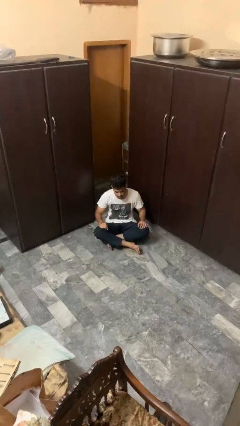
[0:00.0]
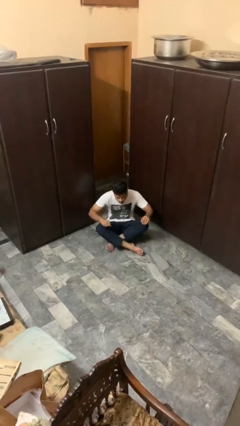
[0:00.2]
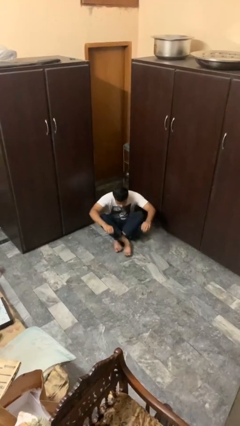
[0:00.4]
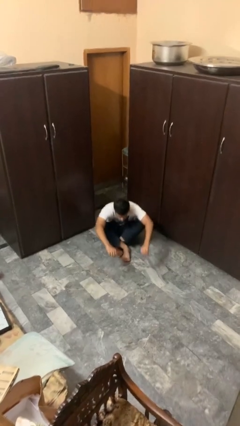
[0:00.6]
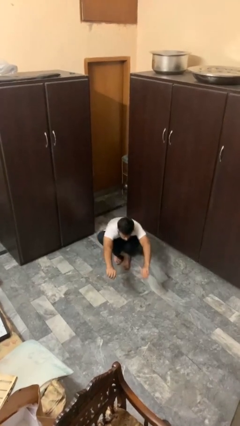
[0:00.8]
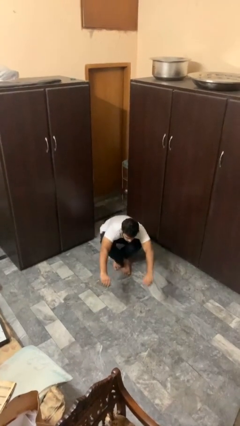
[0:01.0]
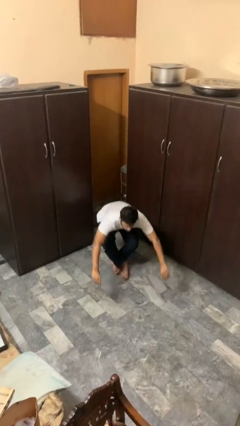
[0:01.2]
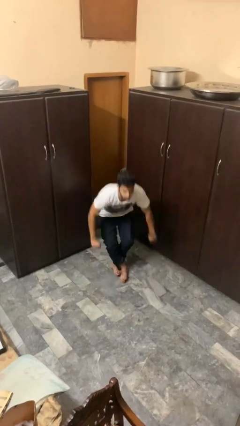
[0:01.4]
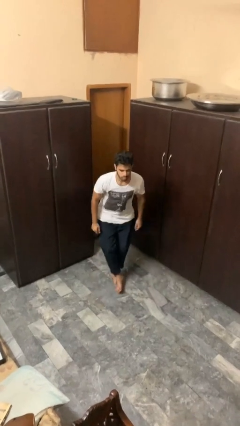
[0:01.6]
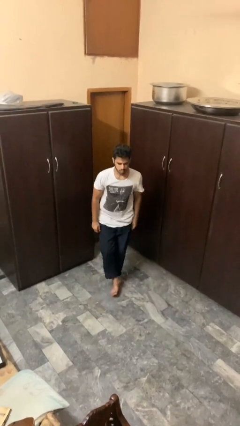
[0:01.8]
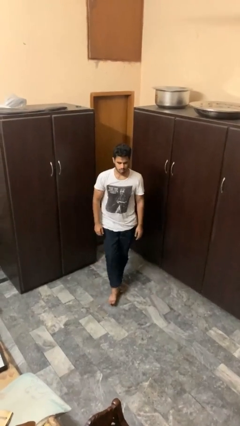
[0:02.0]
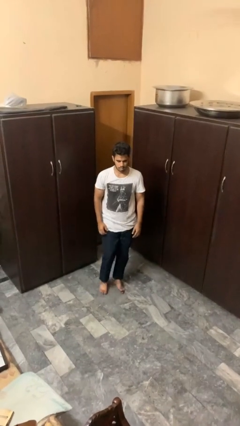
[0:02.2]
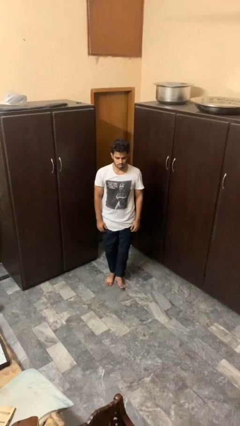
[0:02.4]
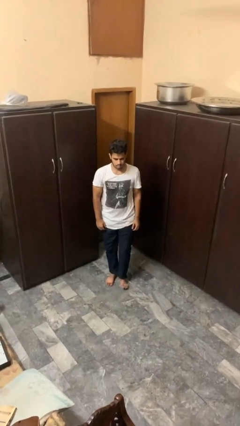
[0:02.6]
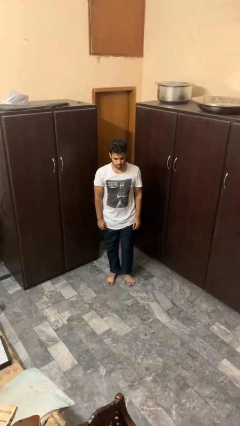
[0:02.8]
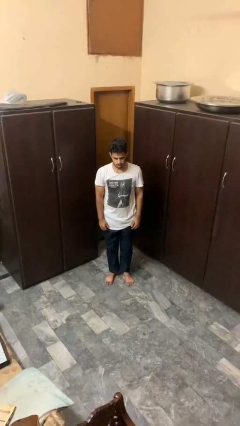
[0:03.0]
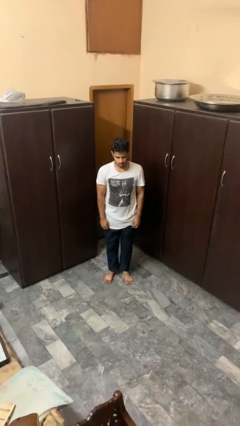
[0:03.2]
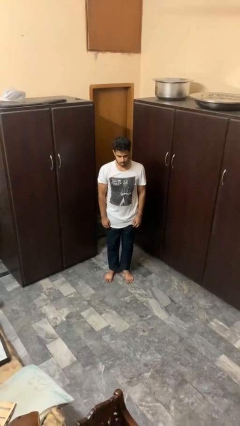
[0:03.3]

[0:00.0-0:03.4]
person stands up from floor

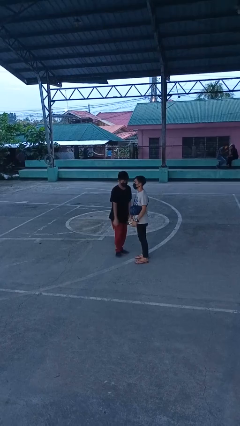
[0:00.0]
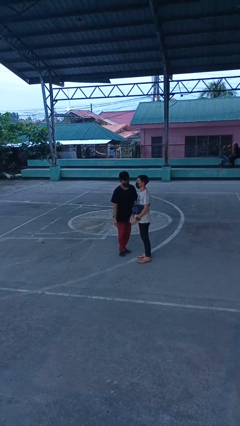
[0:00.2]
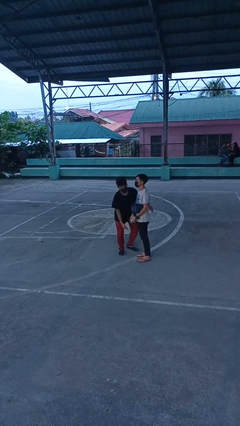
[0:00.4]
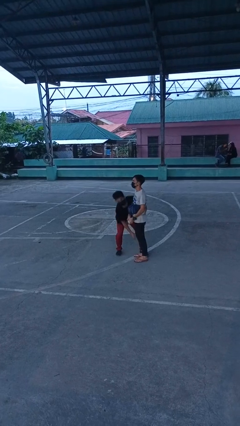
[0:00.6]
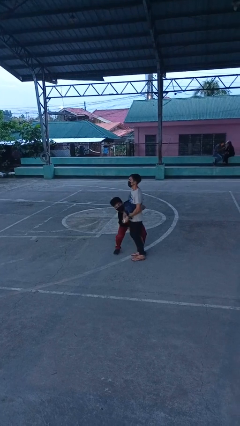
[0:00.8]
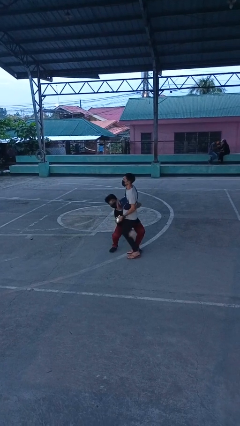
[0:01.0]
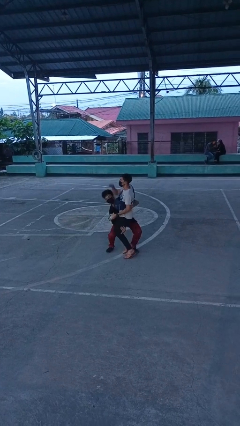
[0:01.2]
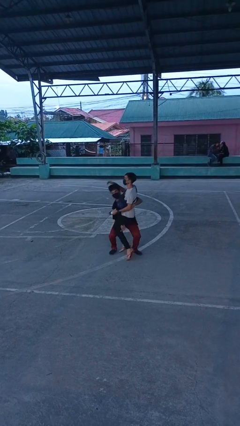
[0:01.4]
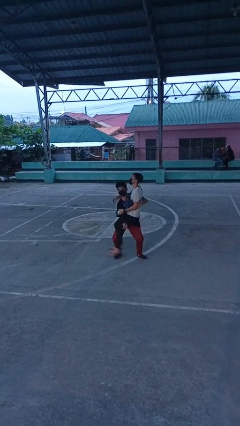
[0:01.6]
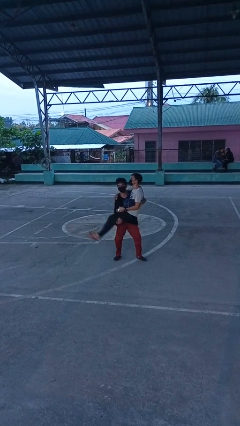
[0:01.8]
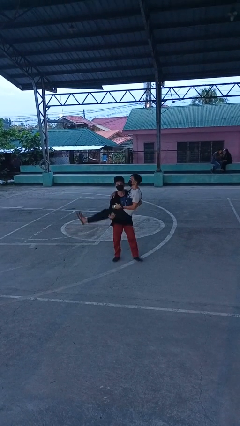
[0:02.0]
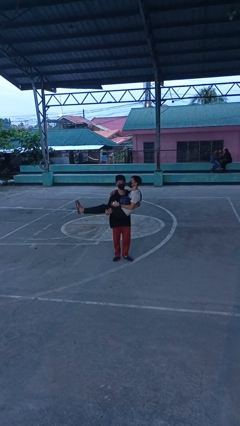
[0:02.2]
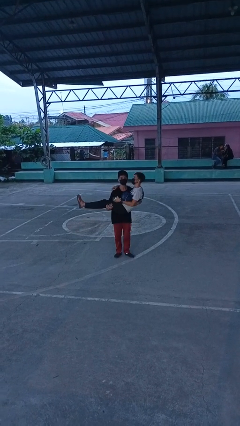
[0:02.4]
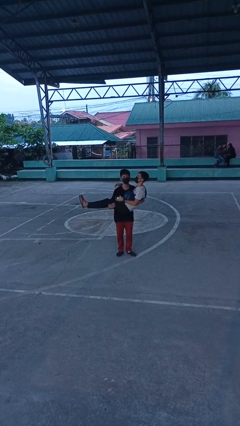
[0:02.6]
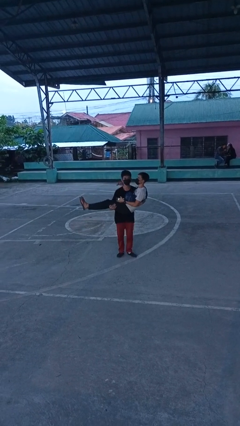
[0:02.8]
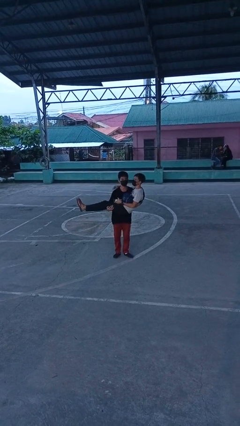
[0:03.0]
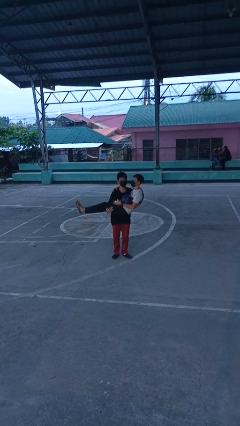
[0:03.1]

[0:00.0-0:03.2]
person picks up person

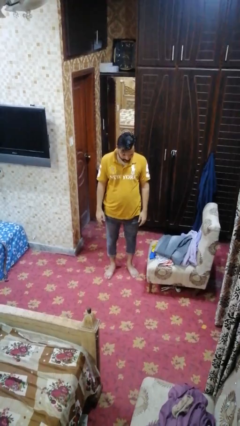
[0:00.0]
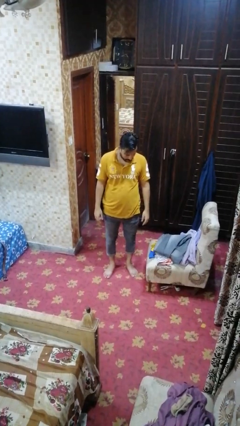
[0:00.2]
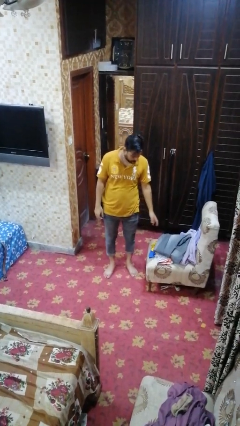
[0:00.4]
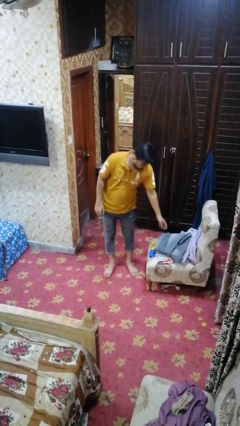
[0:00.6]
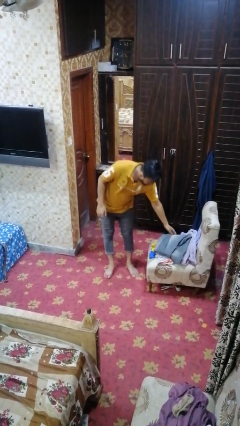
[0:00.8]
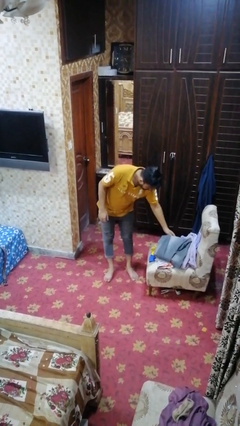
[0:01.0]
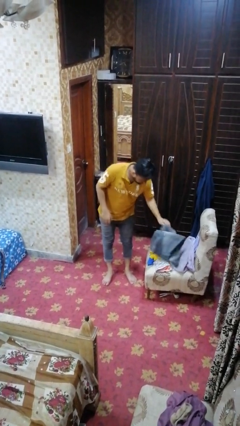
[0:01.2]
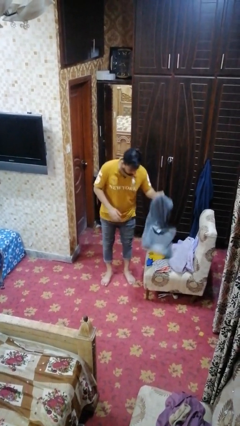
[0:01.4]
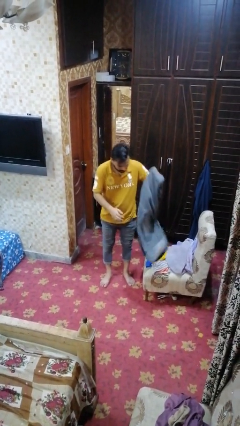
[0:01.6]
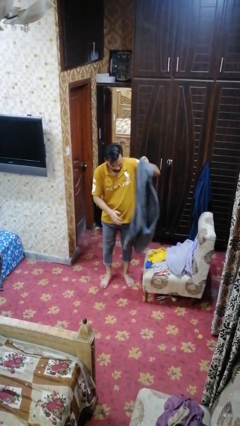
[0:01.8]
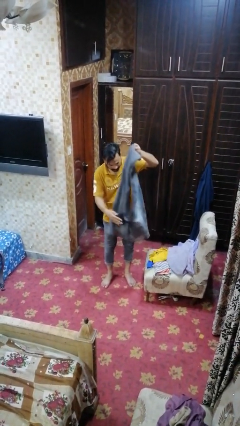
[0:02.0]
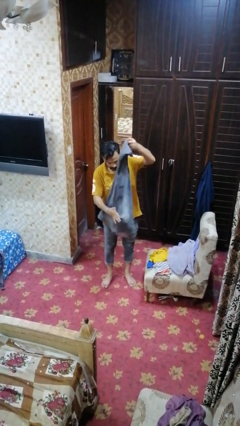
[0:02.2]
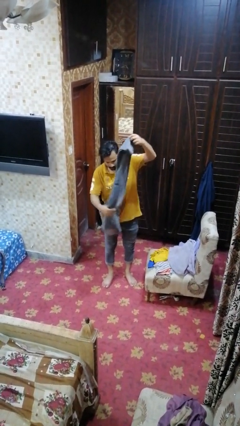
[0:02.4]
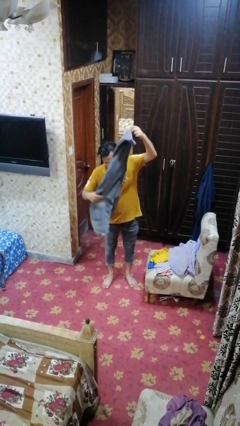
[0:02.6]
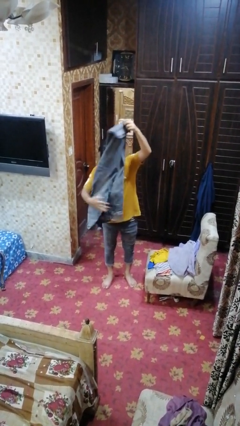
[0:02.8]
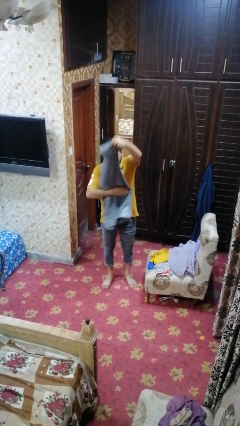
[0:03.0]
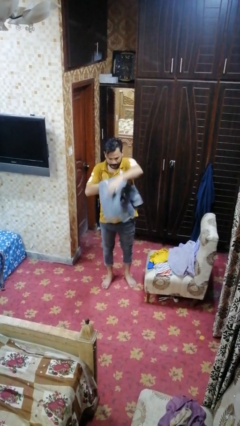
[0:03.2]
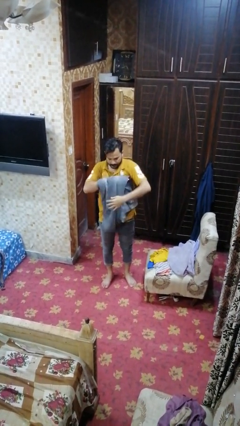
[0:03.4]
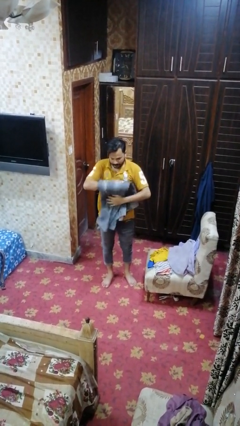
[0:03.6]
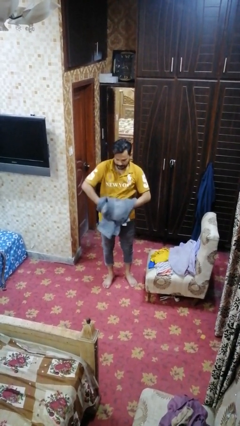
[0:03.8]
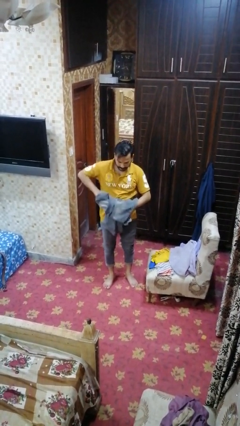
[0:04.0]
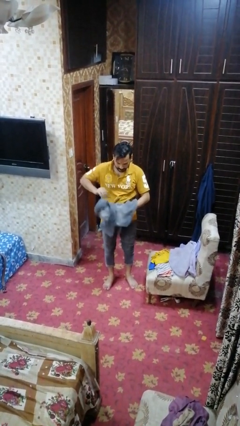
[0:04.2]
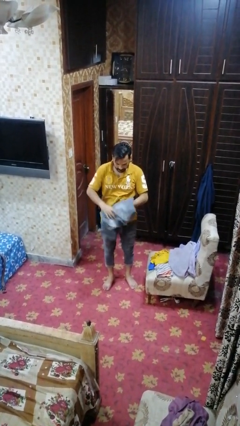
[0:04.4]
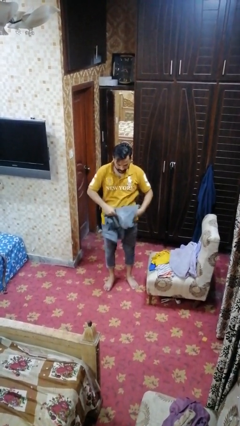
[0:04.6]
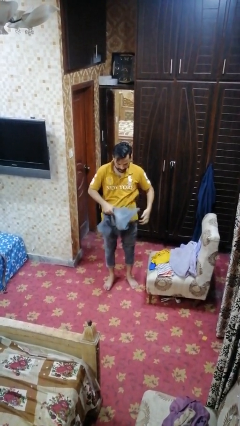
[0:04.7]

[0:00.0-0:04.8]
person folds pants

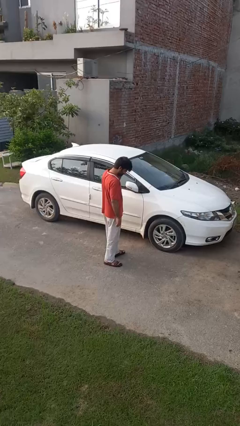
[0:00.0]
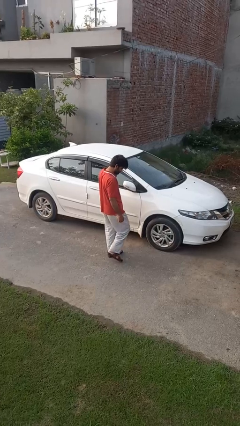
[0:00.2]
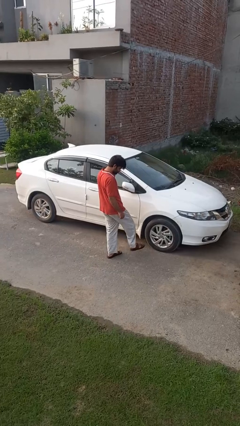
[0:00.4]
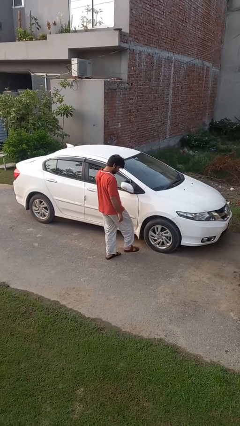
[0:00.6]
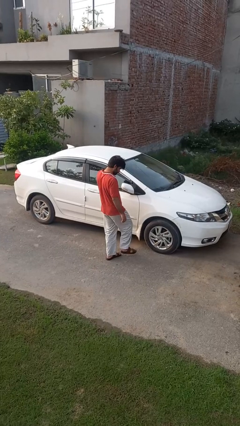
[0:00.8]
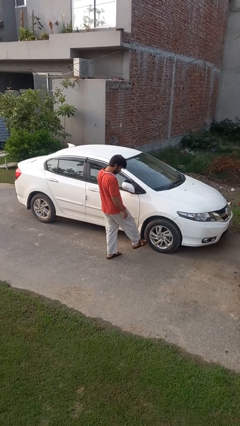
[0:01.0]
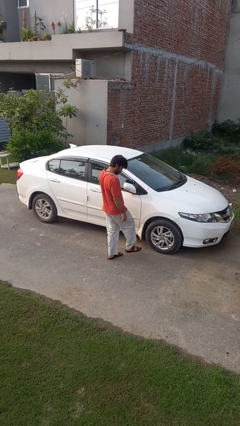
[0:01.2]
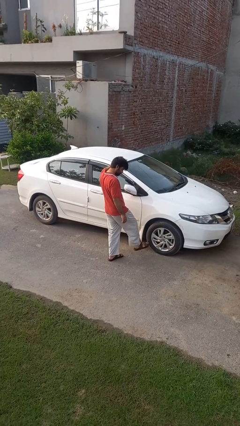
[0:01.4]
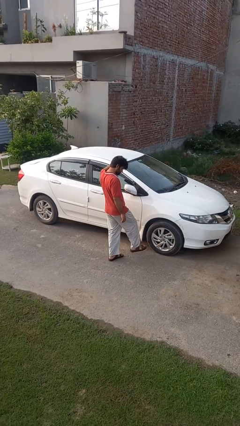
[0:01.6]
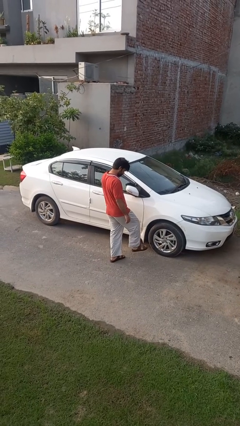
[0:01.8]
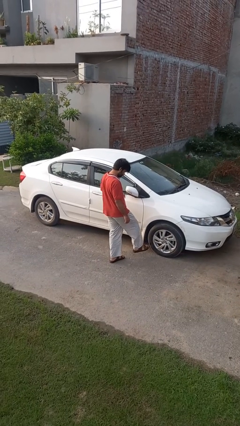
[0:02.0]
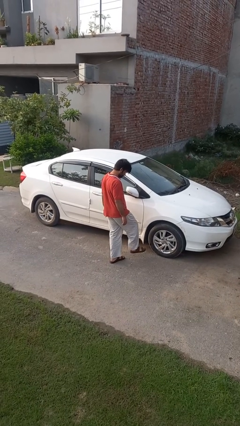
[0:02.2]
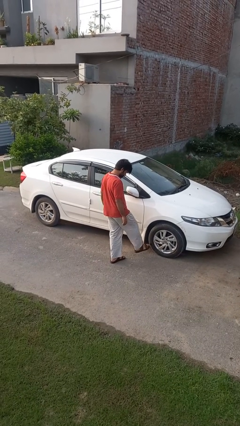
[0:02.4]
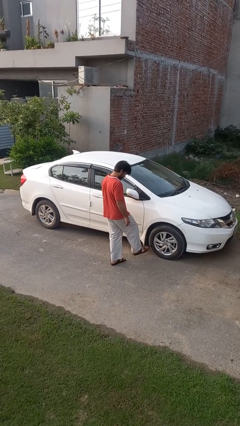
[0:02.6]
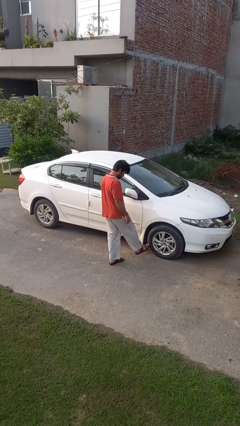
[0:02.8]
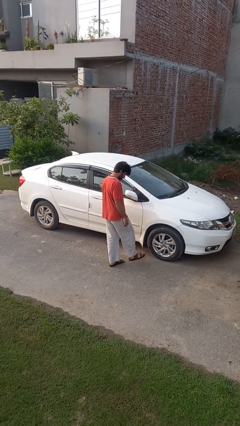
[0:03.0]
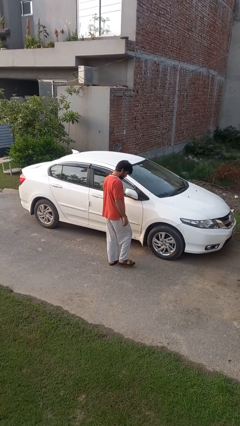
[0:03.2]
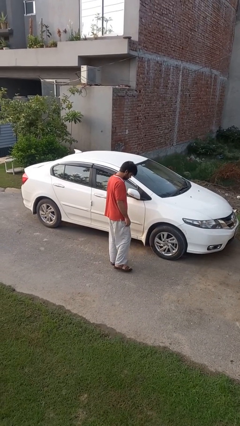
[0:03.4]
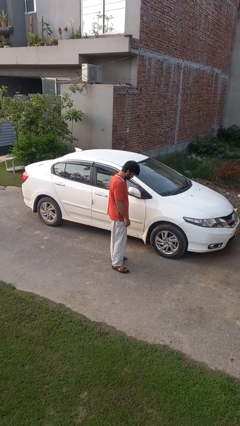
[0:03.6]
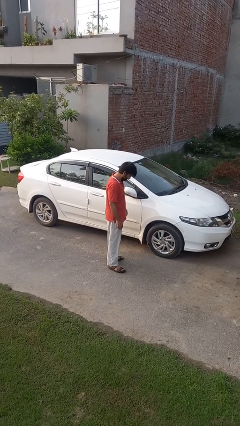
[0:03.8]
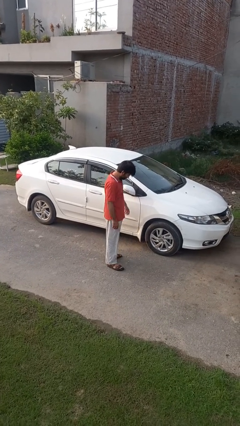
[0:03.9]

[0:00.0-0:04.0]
person kicks car tires

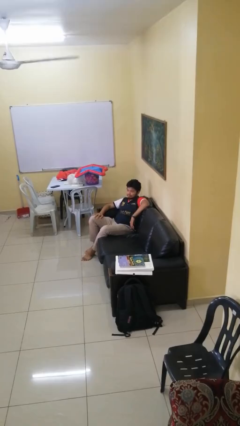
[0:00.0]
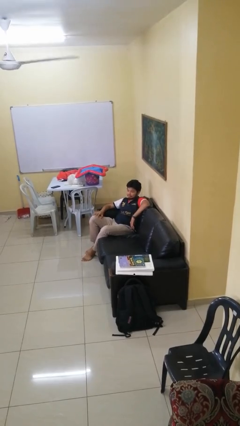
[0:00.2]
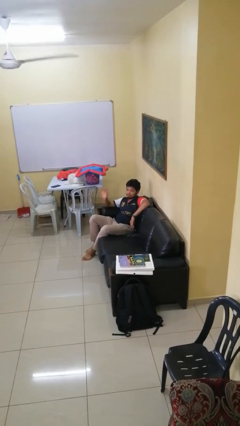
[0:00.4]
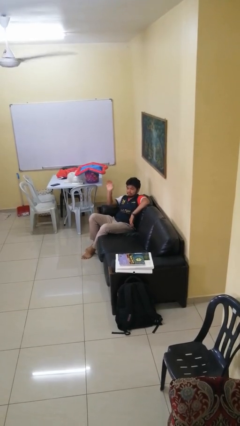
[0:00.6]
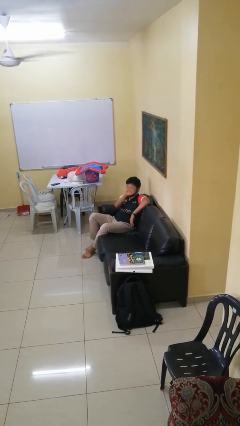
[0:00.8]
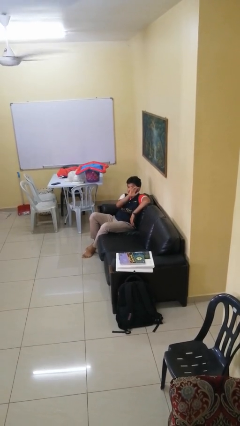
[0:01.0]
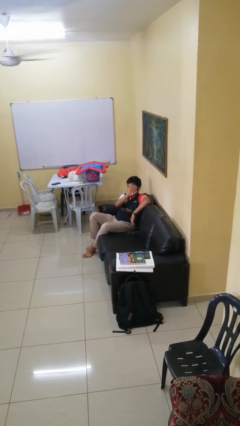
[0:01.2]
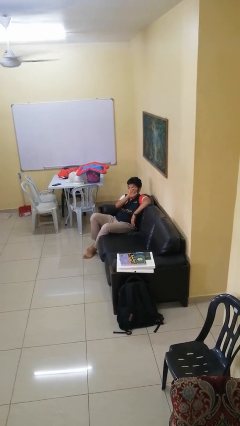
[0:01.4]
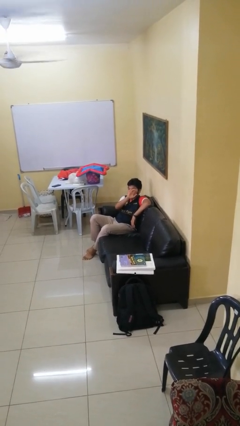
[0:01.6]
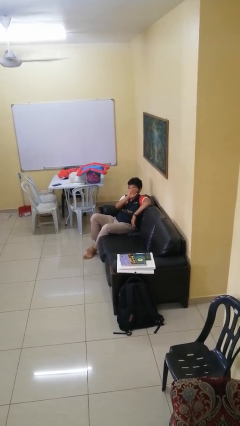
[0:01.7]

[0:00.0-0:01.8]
person gestures swipe left
